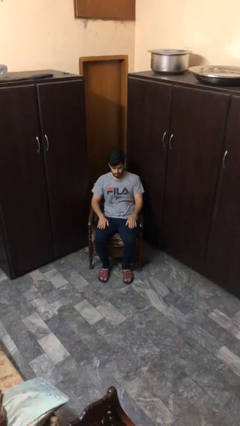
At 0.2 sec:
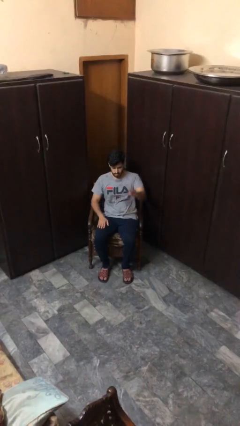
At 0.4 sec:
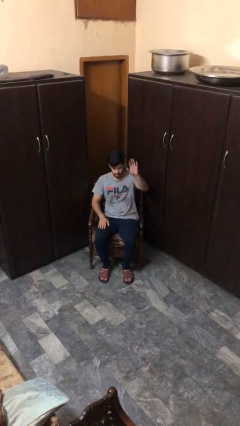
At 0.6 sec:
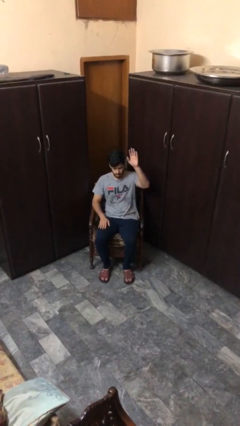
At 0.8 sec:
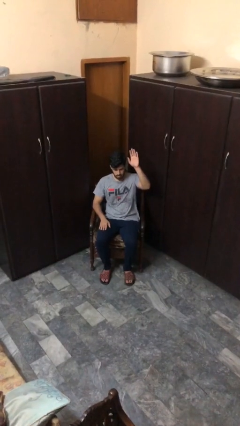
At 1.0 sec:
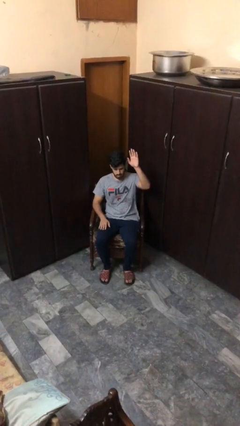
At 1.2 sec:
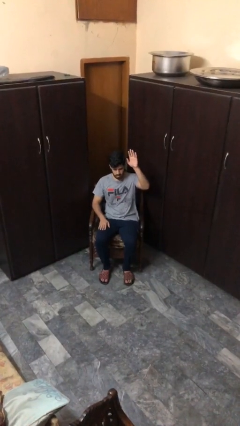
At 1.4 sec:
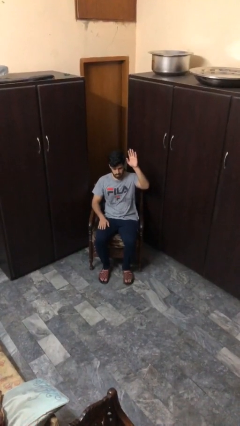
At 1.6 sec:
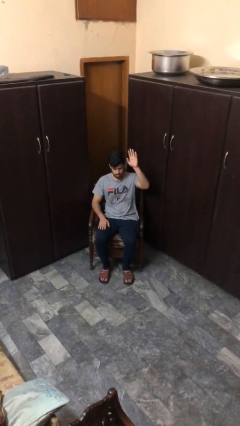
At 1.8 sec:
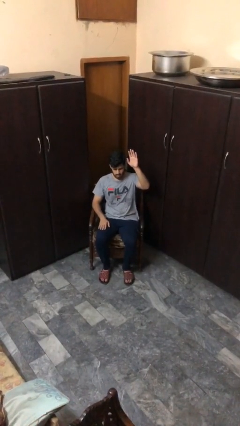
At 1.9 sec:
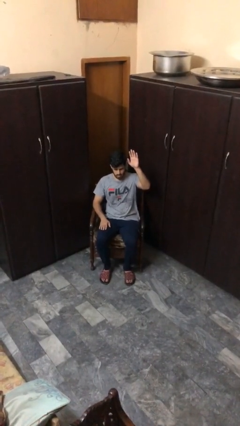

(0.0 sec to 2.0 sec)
person gestures raise hand

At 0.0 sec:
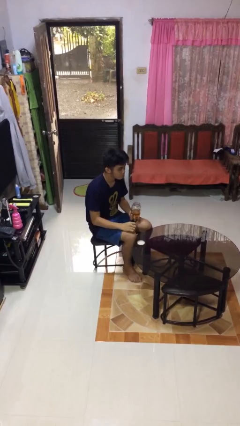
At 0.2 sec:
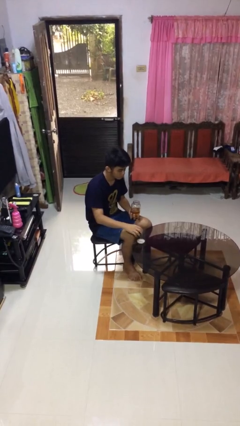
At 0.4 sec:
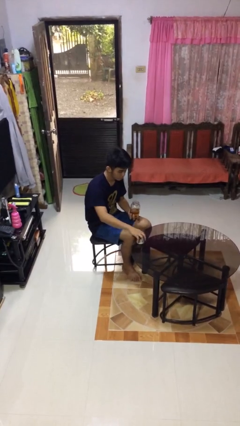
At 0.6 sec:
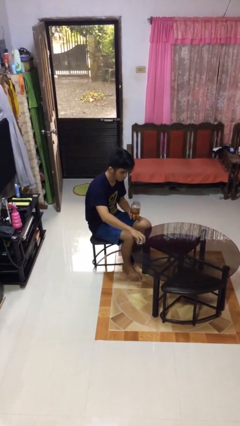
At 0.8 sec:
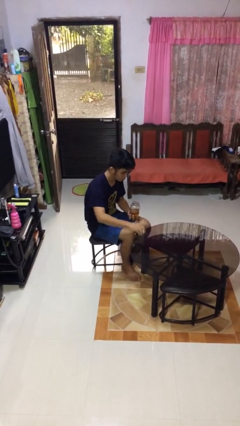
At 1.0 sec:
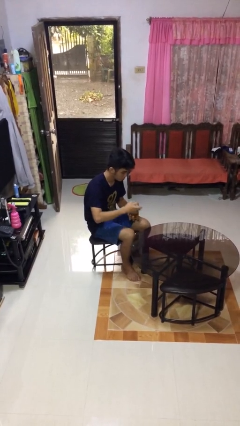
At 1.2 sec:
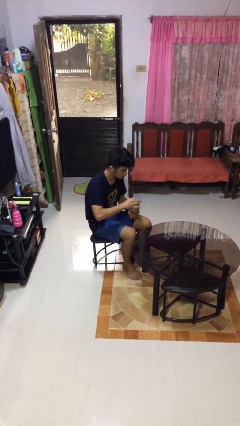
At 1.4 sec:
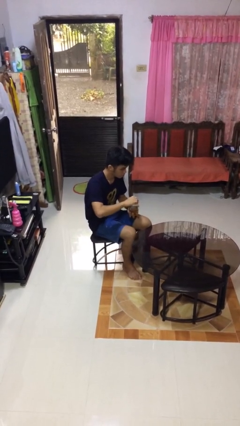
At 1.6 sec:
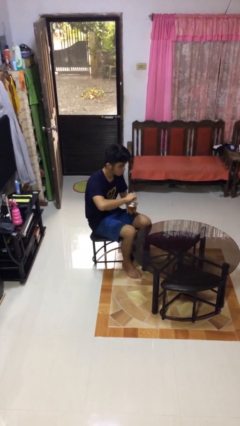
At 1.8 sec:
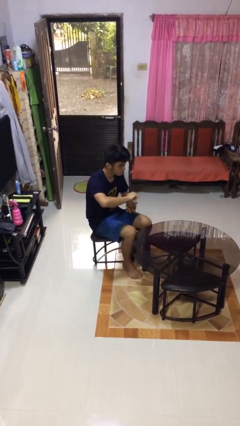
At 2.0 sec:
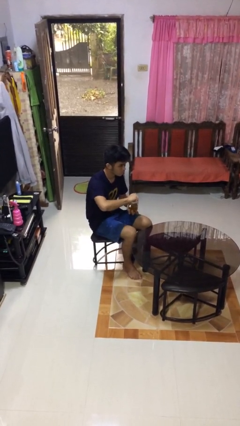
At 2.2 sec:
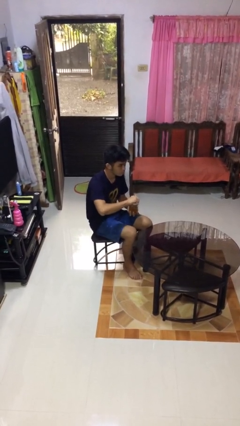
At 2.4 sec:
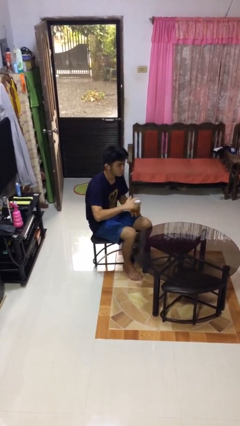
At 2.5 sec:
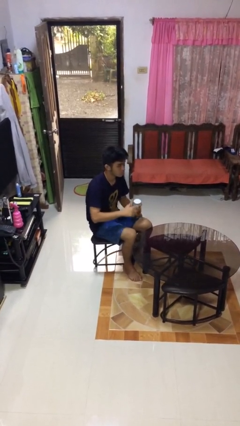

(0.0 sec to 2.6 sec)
person closes jar

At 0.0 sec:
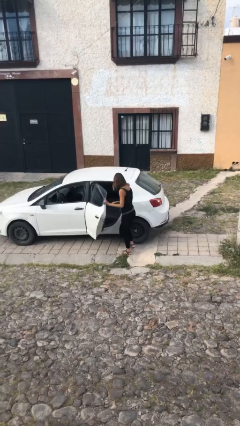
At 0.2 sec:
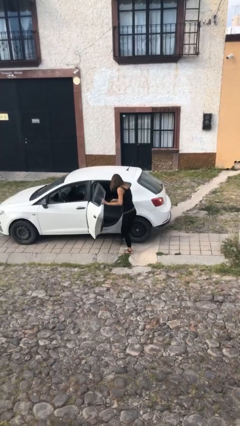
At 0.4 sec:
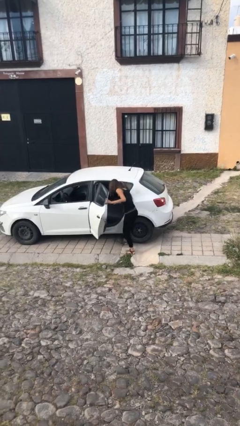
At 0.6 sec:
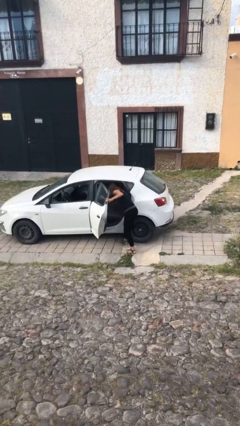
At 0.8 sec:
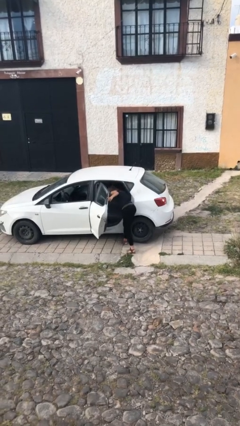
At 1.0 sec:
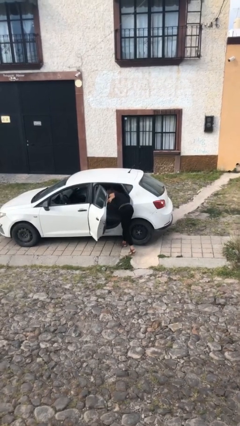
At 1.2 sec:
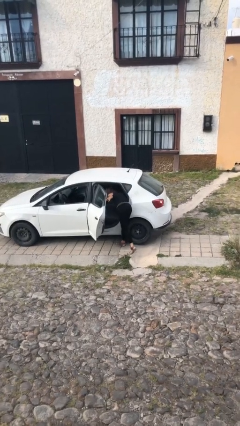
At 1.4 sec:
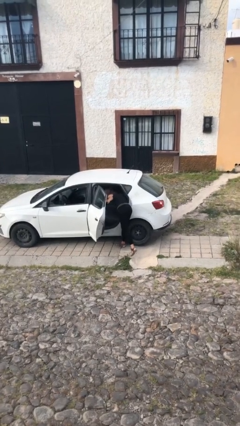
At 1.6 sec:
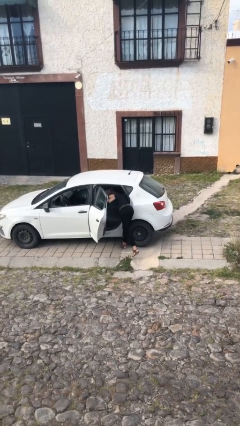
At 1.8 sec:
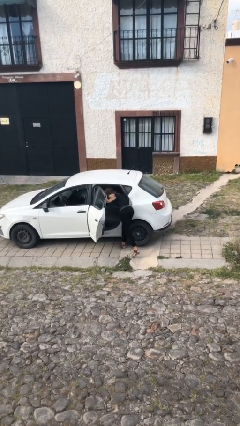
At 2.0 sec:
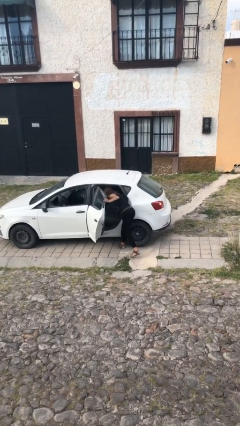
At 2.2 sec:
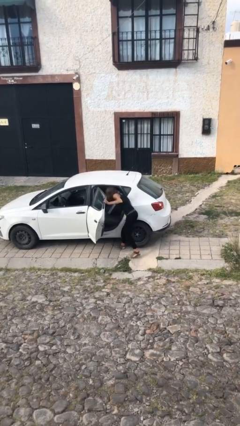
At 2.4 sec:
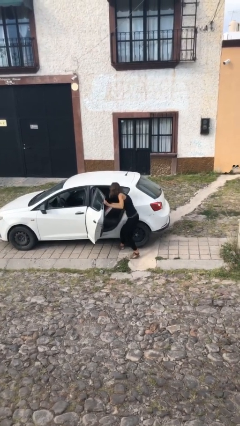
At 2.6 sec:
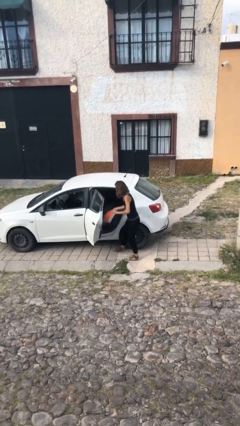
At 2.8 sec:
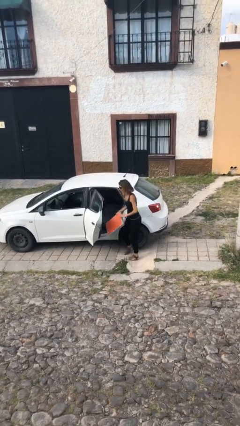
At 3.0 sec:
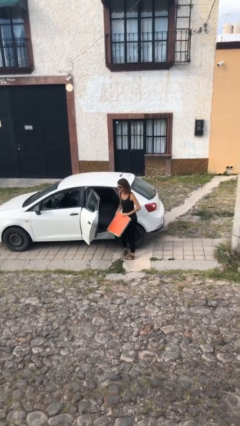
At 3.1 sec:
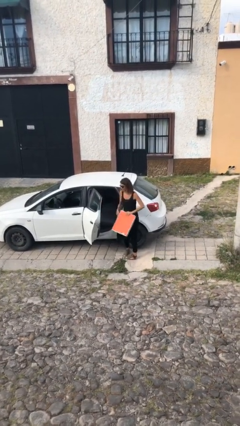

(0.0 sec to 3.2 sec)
person unloads car

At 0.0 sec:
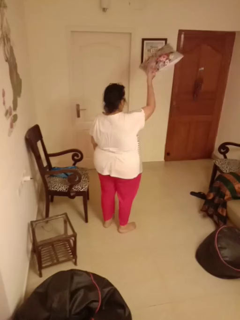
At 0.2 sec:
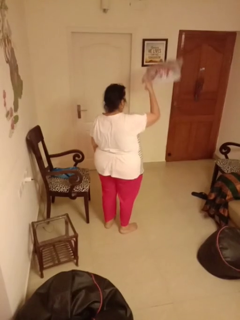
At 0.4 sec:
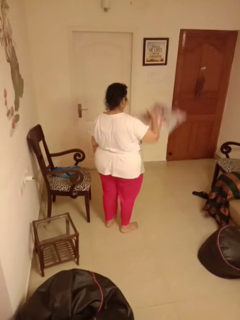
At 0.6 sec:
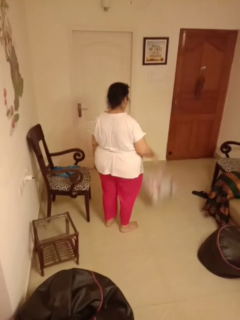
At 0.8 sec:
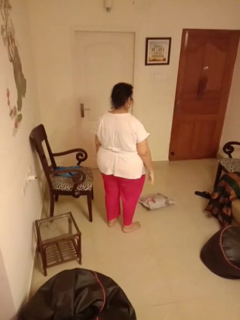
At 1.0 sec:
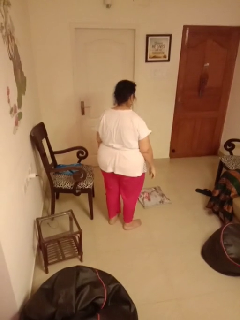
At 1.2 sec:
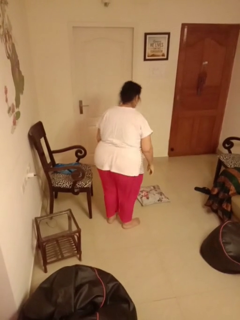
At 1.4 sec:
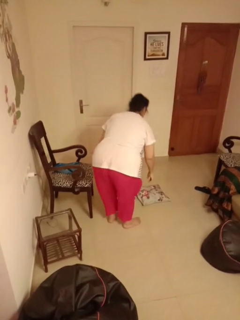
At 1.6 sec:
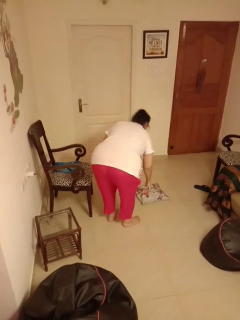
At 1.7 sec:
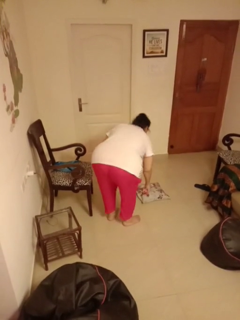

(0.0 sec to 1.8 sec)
person throws object into air

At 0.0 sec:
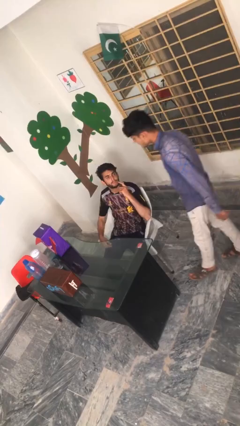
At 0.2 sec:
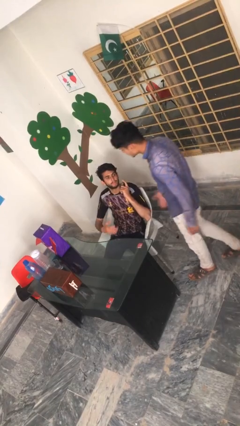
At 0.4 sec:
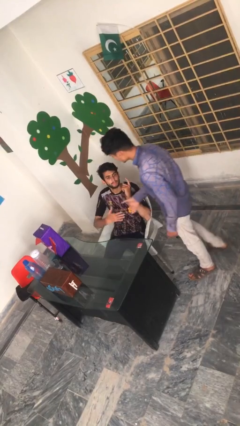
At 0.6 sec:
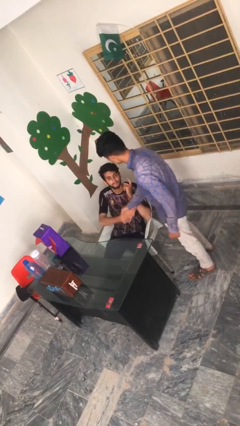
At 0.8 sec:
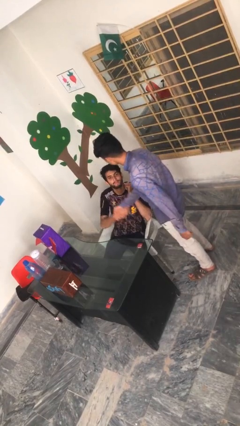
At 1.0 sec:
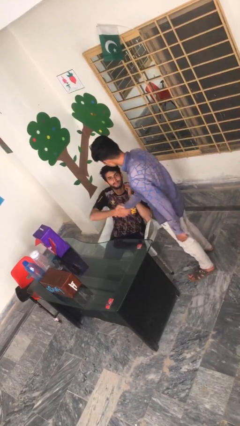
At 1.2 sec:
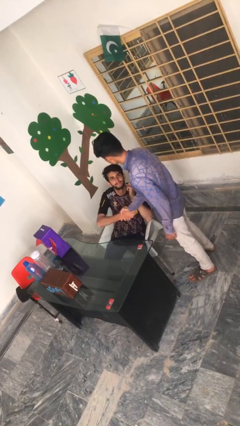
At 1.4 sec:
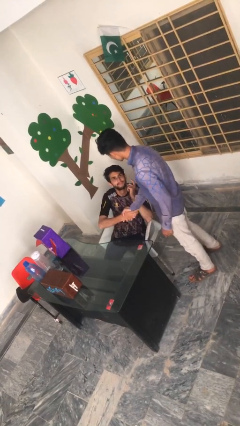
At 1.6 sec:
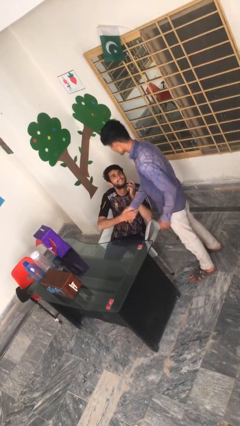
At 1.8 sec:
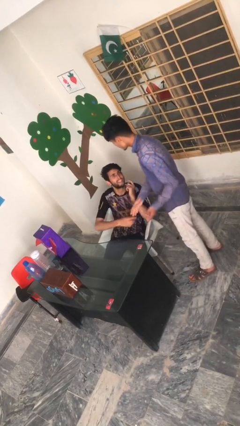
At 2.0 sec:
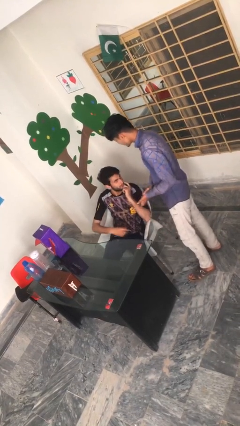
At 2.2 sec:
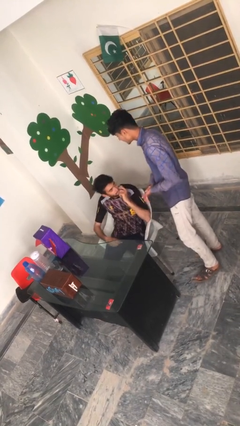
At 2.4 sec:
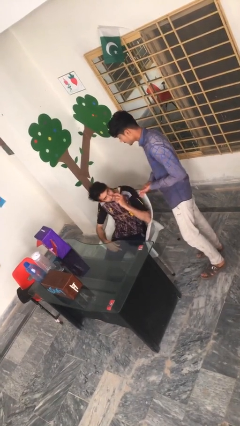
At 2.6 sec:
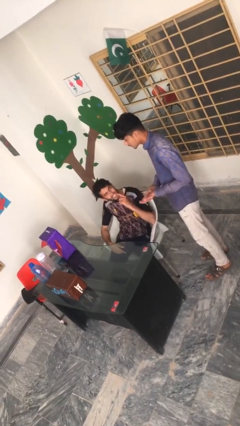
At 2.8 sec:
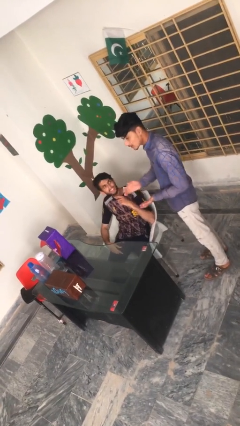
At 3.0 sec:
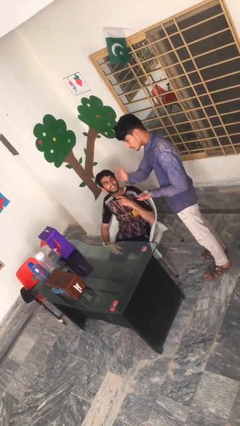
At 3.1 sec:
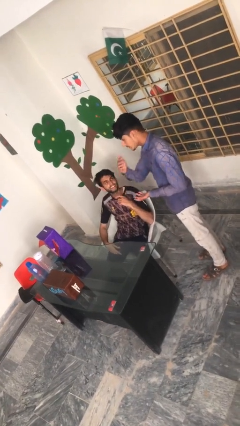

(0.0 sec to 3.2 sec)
person shakes hand

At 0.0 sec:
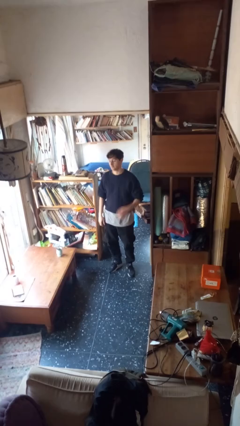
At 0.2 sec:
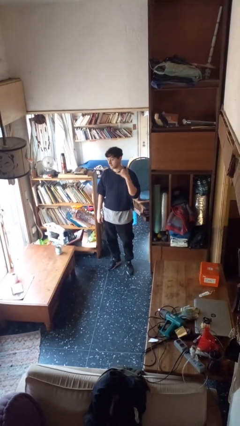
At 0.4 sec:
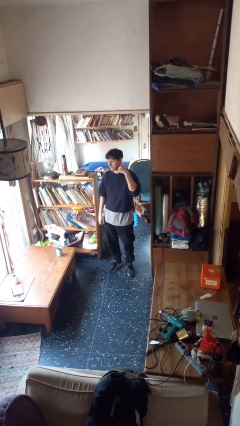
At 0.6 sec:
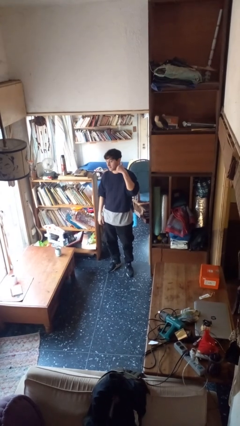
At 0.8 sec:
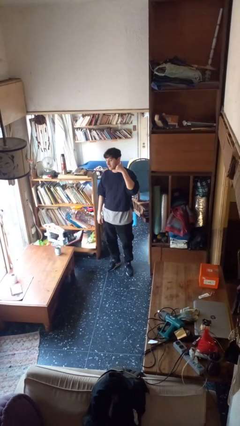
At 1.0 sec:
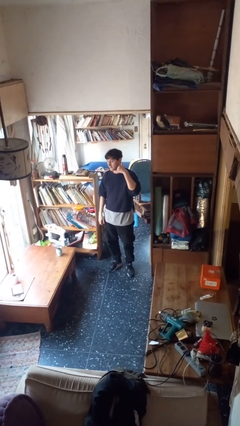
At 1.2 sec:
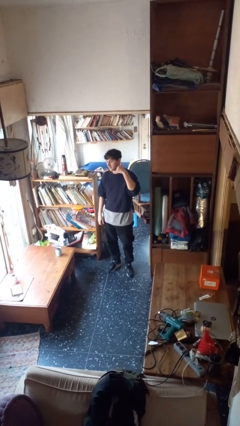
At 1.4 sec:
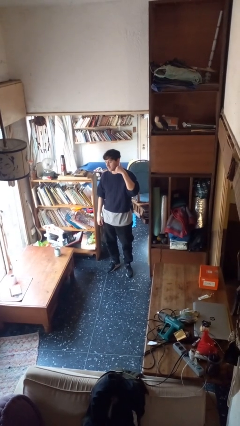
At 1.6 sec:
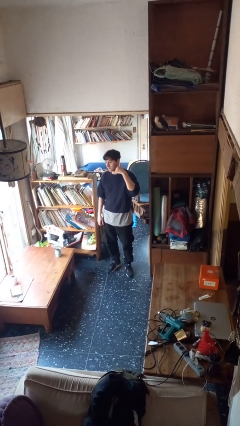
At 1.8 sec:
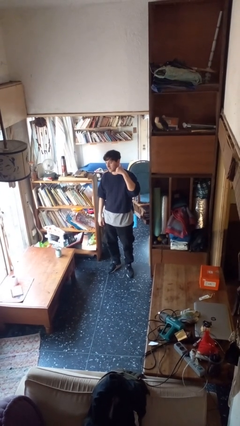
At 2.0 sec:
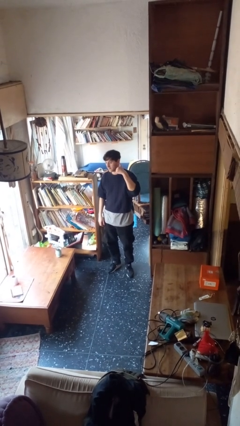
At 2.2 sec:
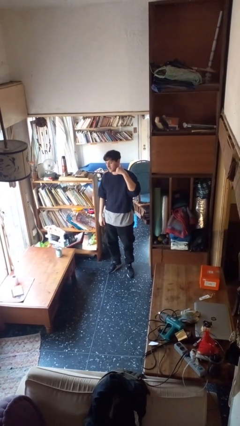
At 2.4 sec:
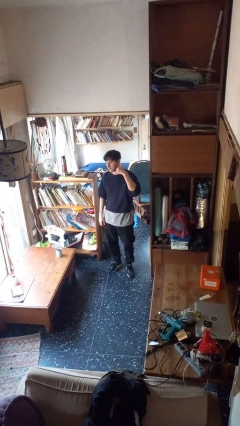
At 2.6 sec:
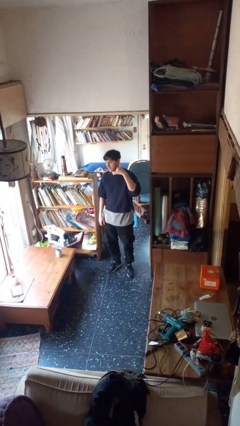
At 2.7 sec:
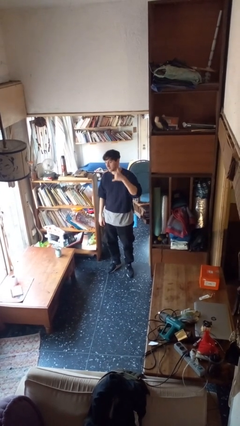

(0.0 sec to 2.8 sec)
person gestures call me

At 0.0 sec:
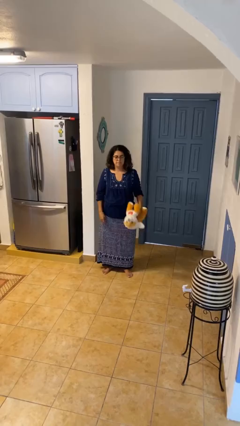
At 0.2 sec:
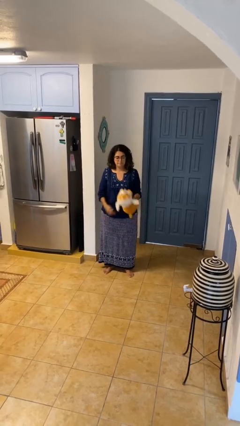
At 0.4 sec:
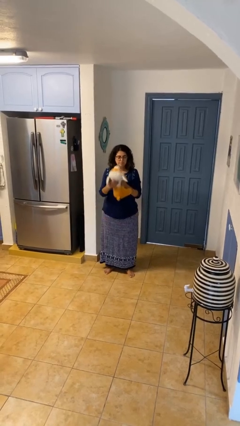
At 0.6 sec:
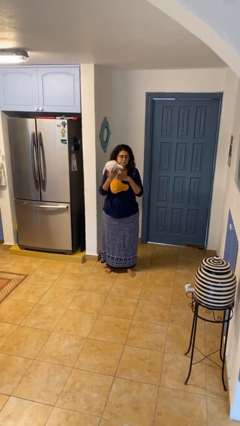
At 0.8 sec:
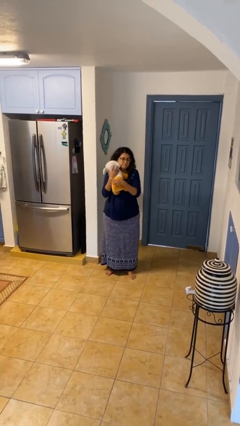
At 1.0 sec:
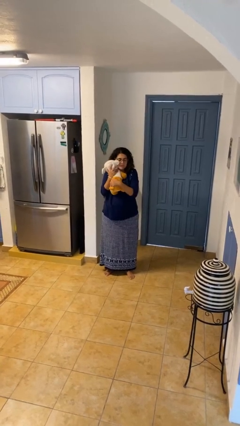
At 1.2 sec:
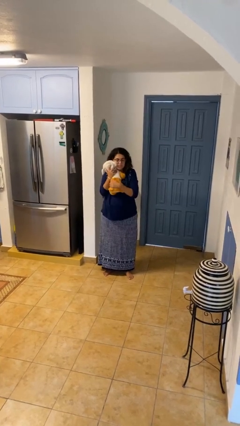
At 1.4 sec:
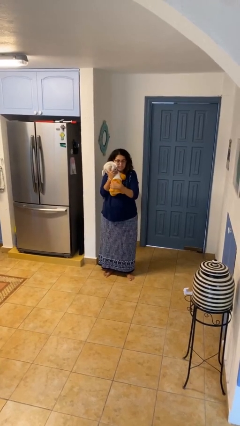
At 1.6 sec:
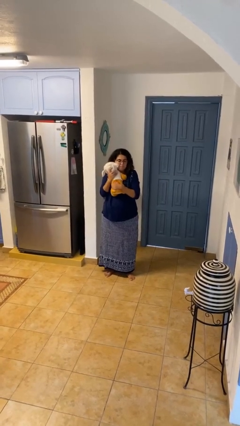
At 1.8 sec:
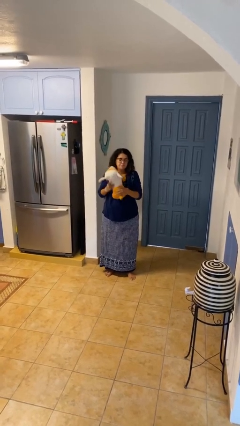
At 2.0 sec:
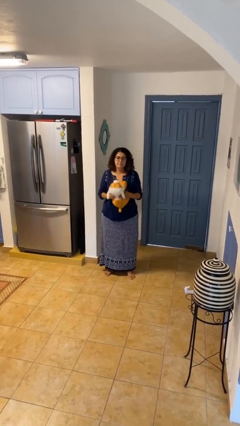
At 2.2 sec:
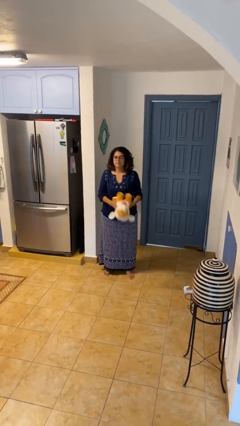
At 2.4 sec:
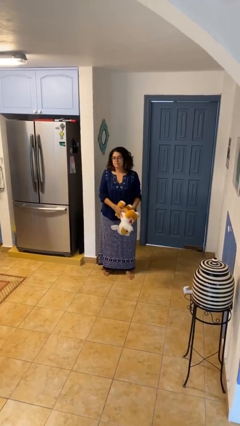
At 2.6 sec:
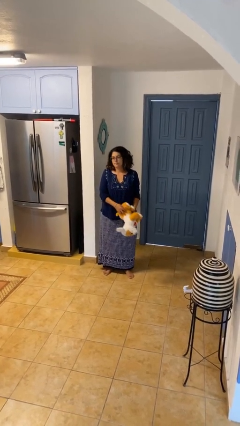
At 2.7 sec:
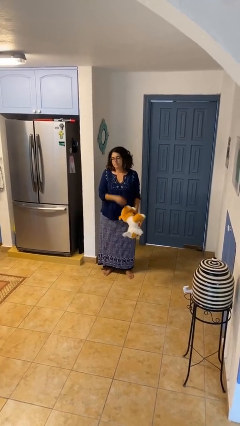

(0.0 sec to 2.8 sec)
person hugs stuffed animal
